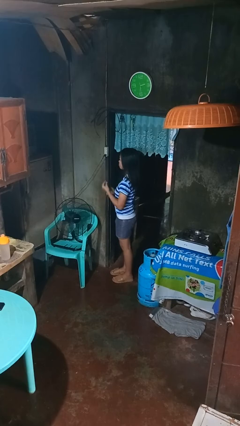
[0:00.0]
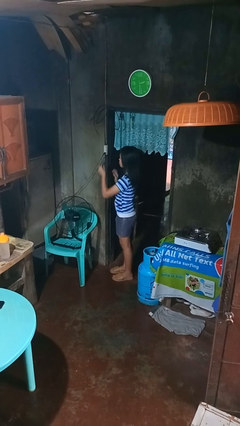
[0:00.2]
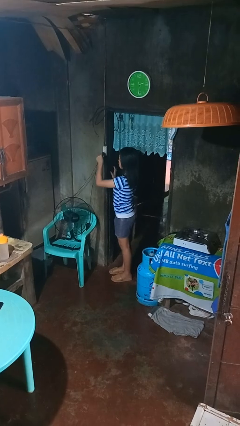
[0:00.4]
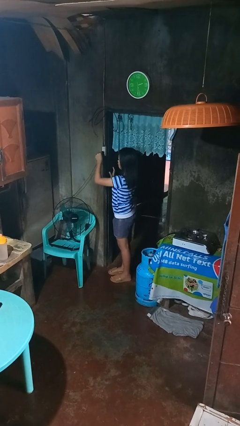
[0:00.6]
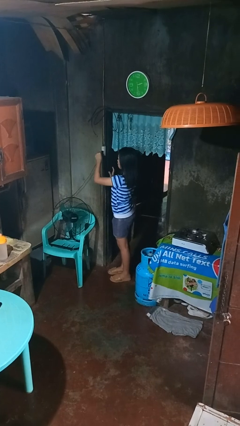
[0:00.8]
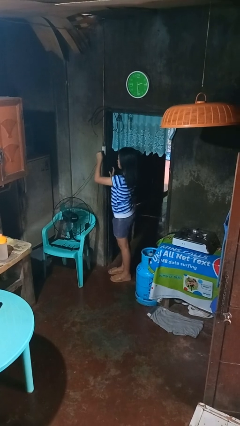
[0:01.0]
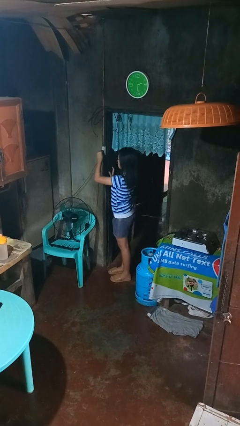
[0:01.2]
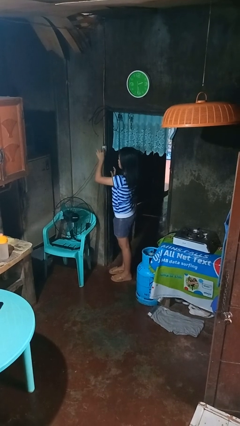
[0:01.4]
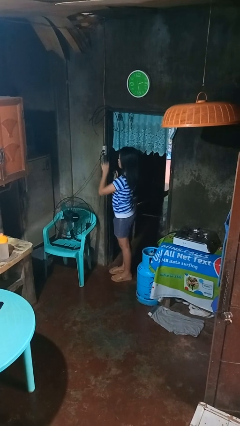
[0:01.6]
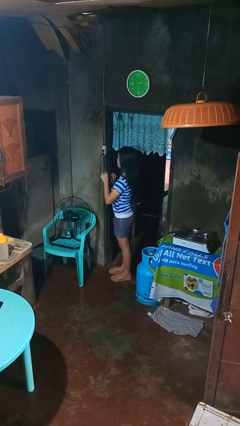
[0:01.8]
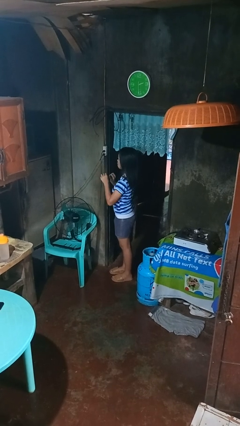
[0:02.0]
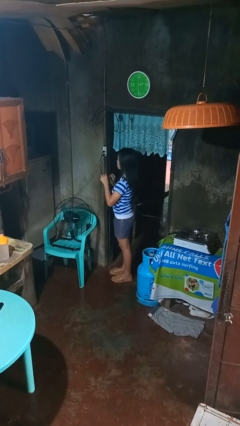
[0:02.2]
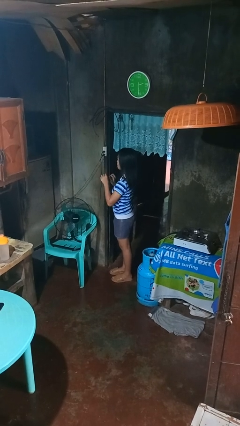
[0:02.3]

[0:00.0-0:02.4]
person plugs into electrical socket

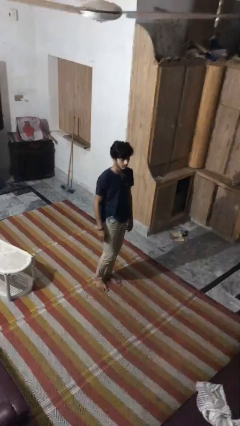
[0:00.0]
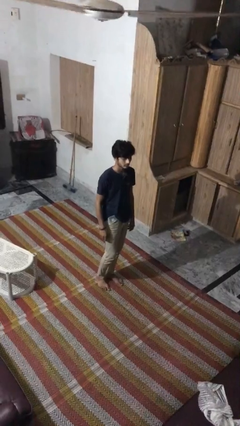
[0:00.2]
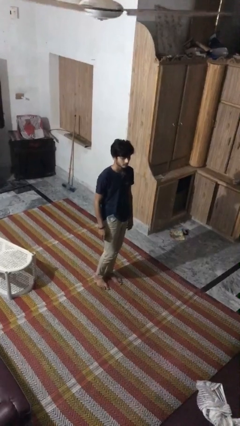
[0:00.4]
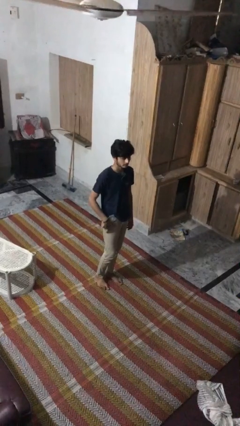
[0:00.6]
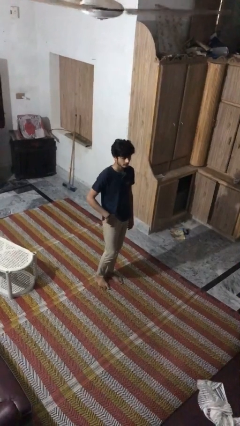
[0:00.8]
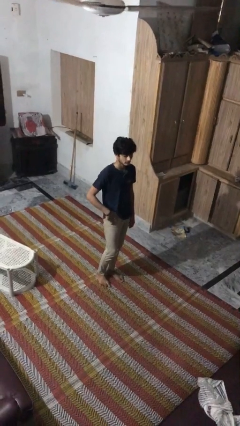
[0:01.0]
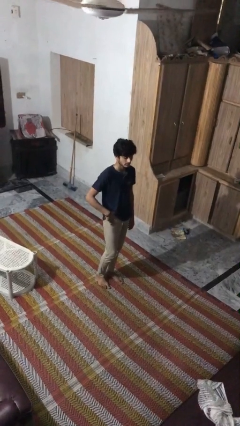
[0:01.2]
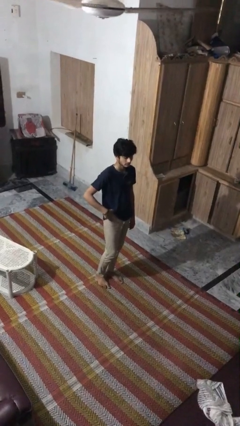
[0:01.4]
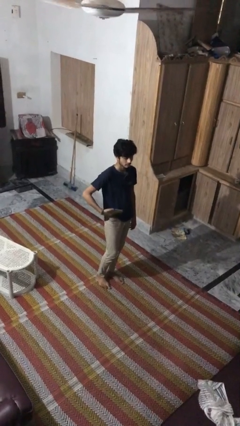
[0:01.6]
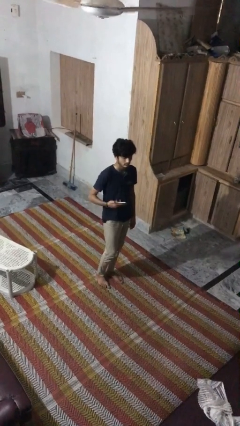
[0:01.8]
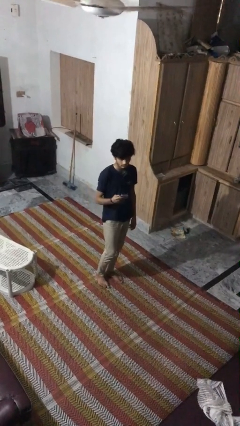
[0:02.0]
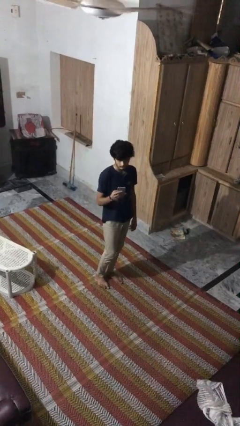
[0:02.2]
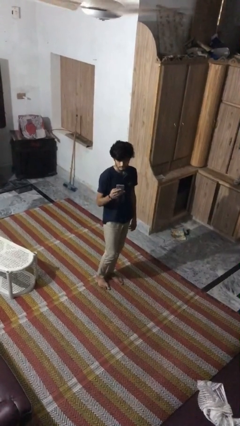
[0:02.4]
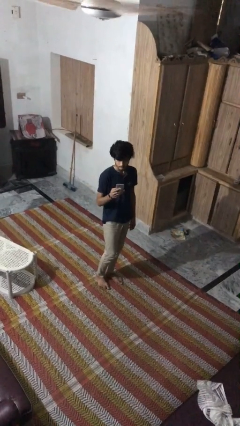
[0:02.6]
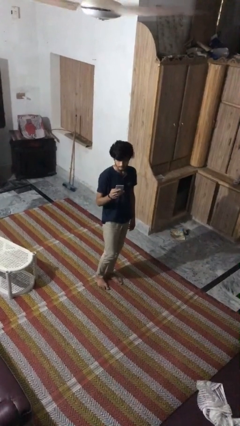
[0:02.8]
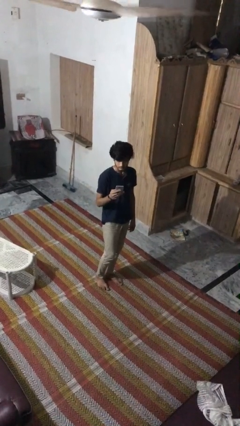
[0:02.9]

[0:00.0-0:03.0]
person takes phone from pocket

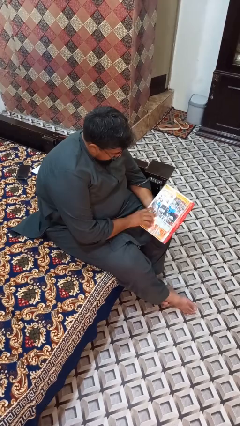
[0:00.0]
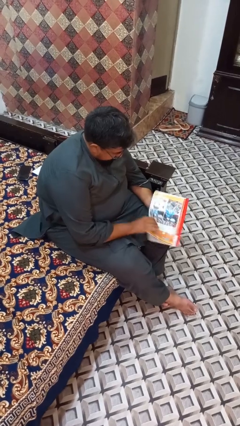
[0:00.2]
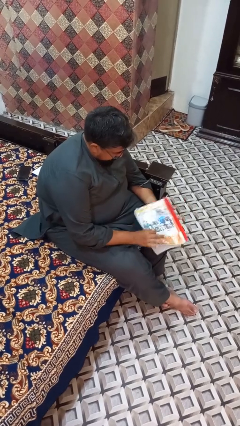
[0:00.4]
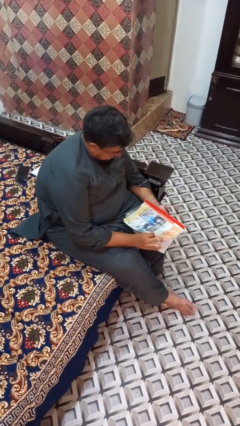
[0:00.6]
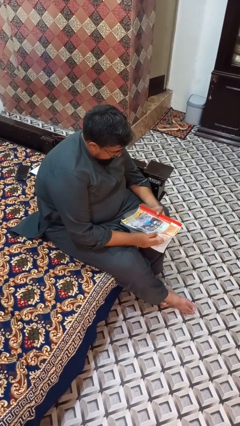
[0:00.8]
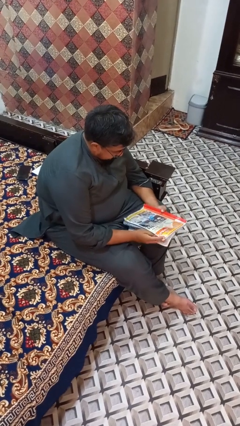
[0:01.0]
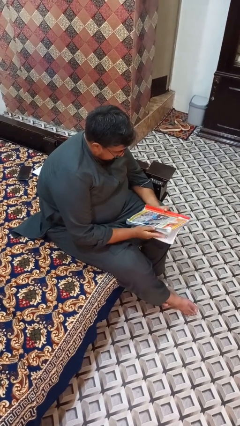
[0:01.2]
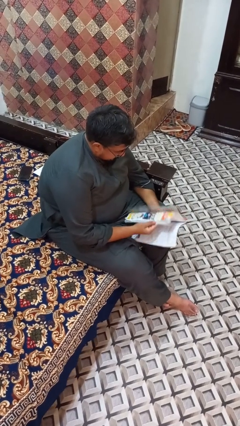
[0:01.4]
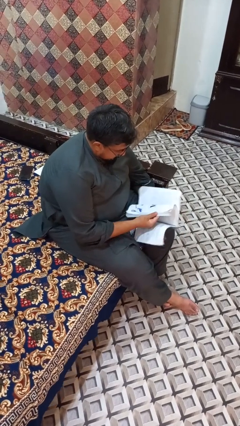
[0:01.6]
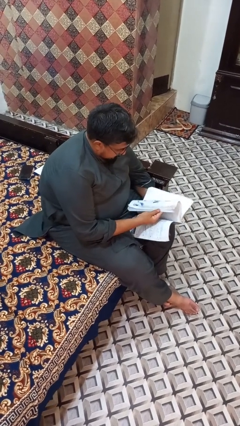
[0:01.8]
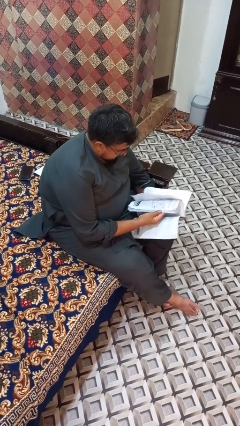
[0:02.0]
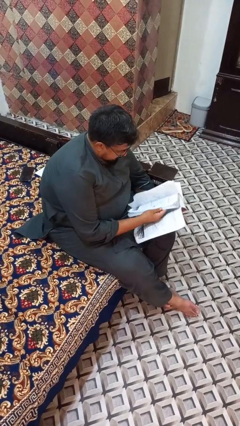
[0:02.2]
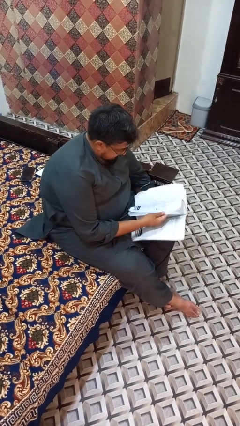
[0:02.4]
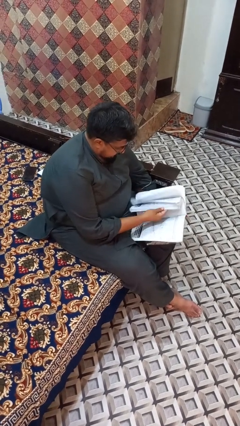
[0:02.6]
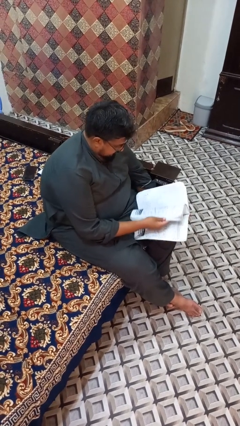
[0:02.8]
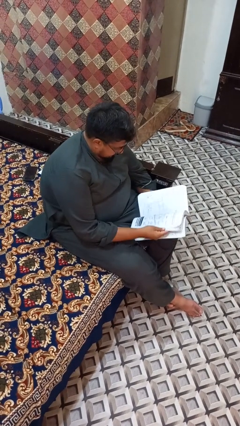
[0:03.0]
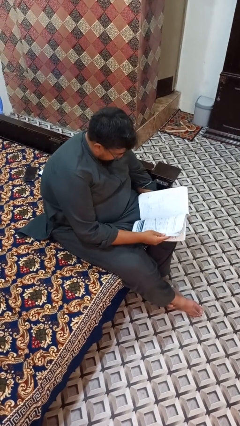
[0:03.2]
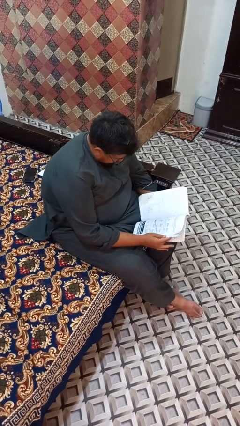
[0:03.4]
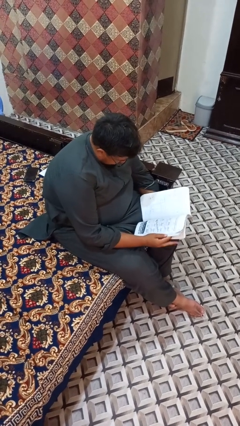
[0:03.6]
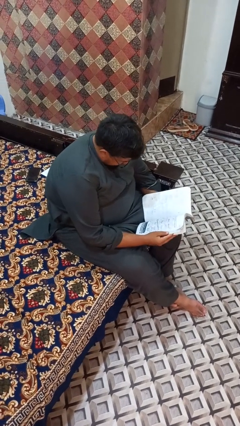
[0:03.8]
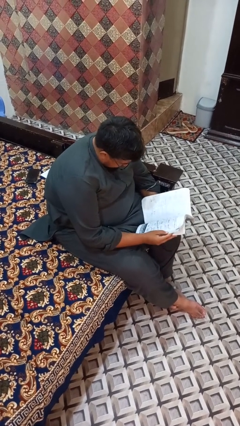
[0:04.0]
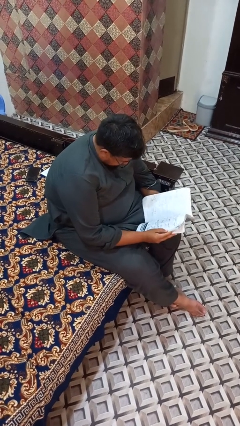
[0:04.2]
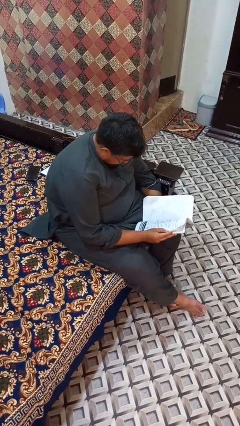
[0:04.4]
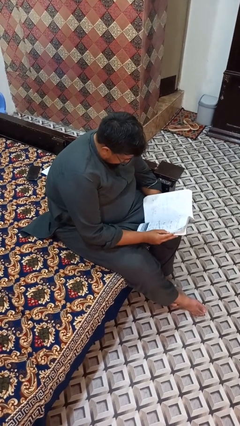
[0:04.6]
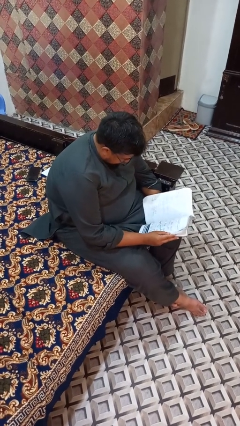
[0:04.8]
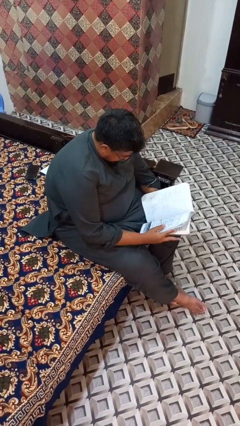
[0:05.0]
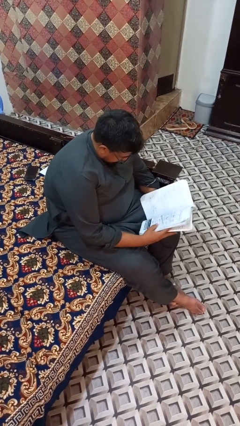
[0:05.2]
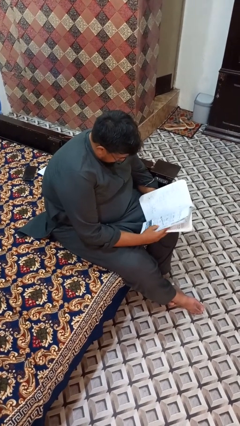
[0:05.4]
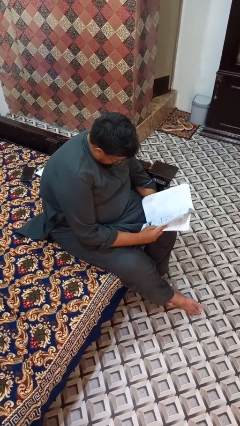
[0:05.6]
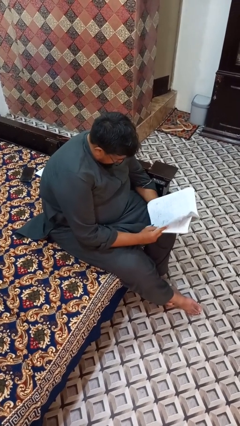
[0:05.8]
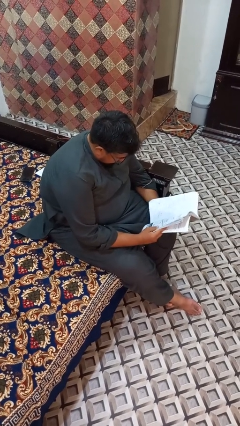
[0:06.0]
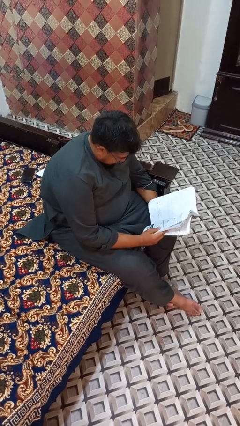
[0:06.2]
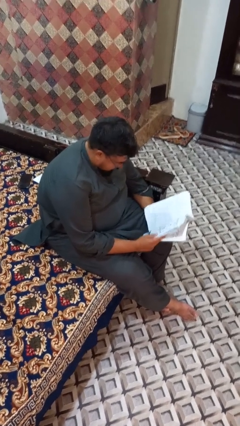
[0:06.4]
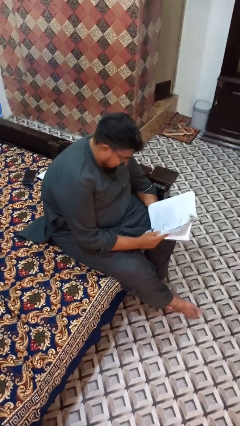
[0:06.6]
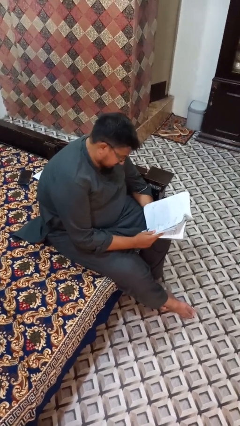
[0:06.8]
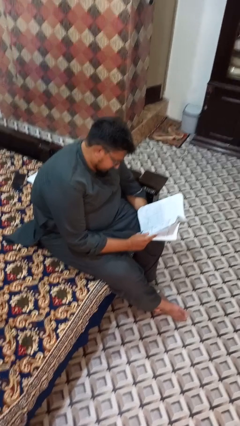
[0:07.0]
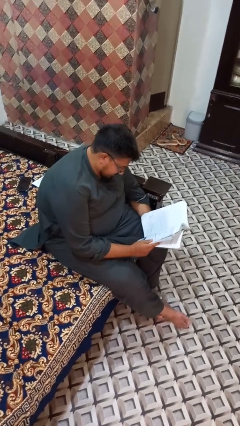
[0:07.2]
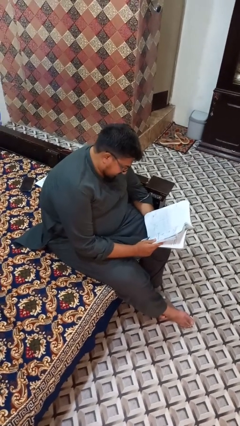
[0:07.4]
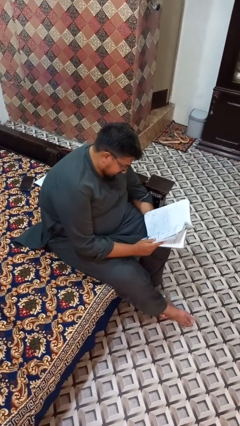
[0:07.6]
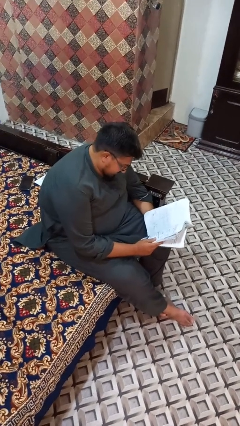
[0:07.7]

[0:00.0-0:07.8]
person reads book

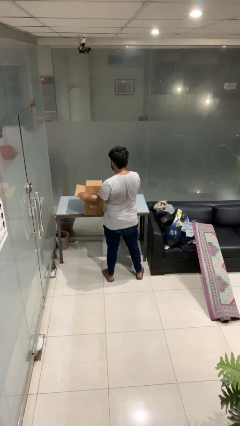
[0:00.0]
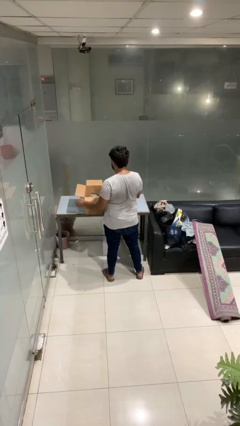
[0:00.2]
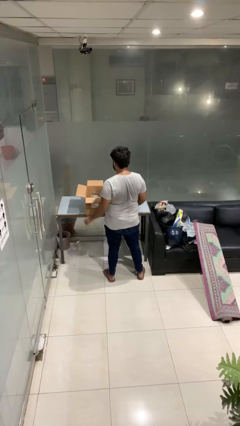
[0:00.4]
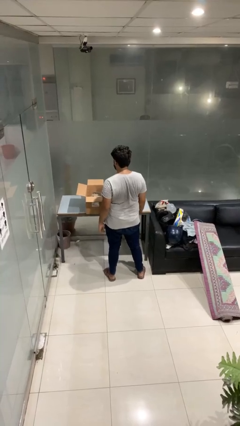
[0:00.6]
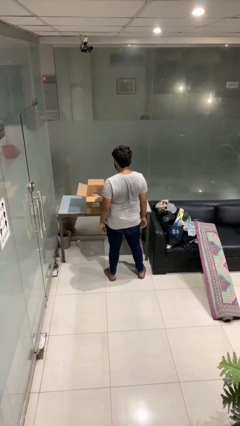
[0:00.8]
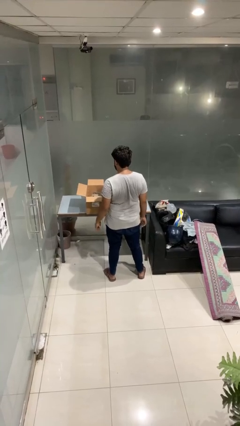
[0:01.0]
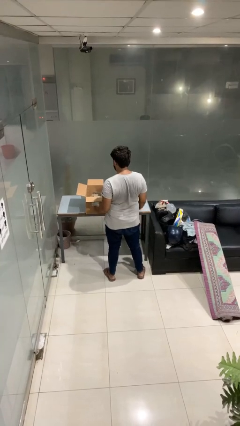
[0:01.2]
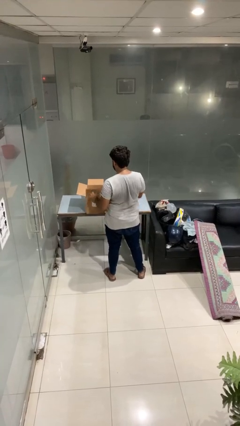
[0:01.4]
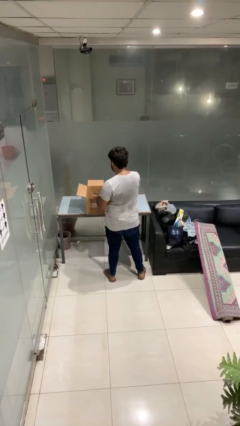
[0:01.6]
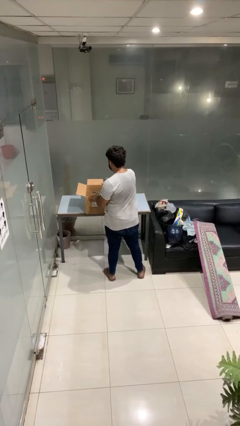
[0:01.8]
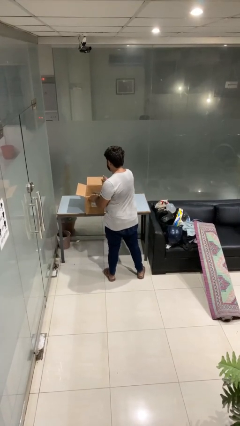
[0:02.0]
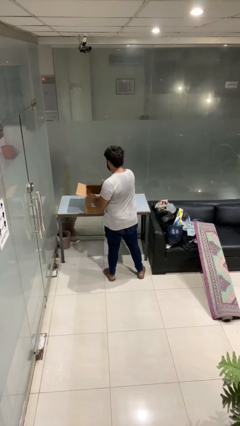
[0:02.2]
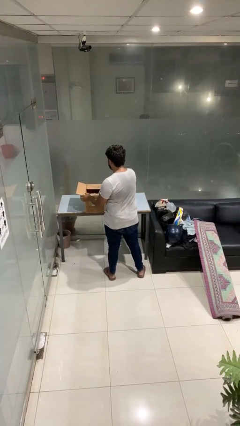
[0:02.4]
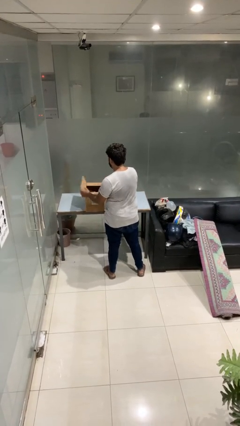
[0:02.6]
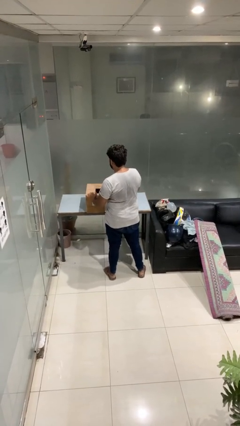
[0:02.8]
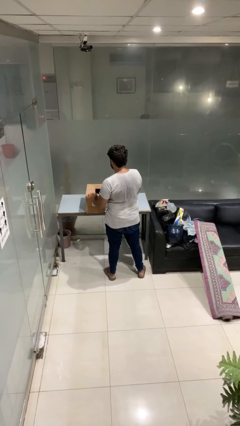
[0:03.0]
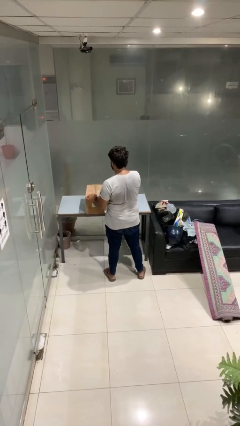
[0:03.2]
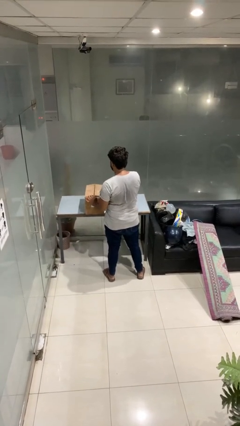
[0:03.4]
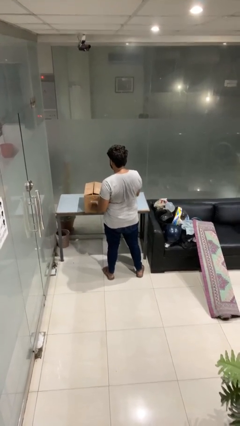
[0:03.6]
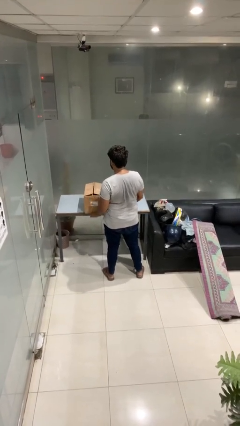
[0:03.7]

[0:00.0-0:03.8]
person closes box

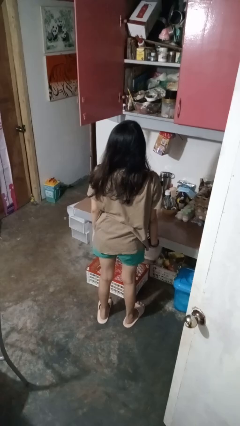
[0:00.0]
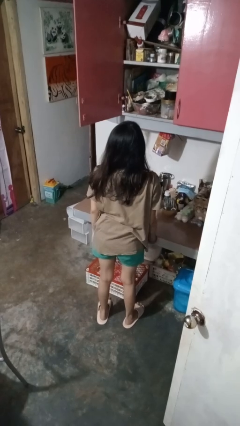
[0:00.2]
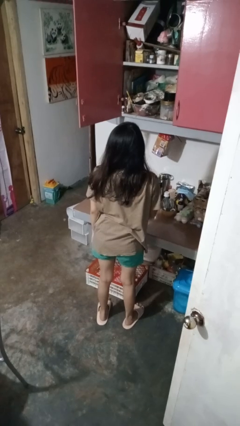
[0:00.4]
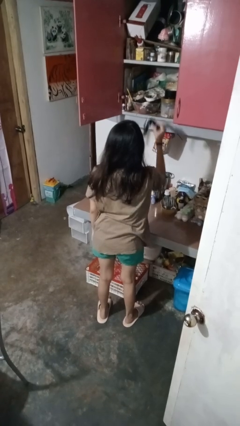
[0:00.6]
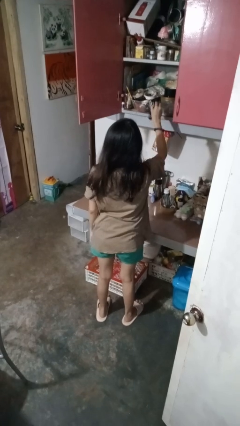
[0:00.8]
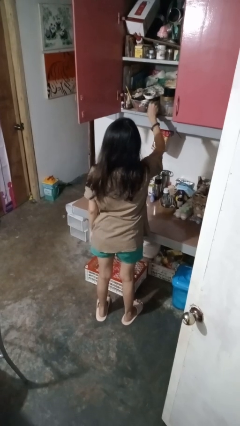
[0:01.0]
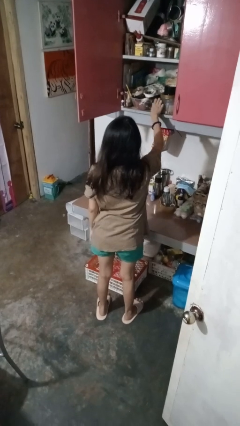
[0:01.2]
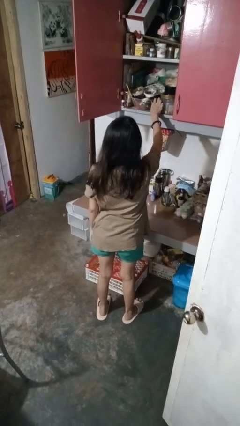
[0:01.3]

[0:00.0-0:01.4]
person puts object in cabinet
